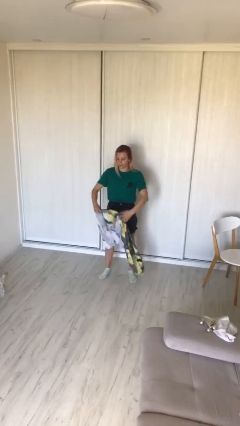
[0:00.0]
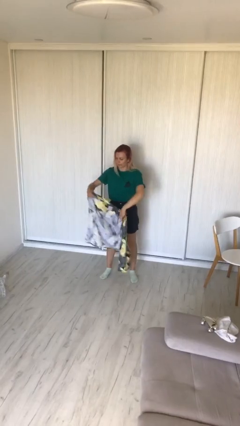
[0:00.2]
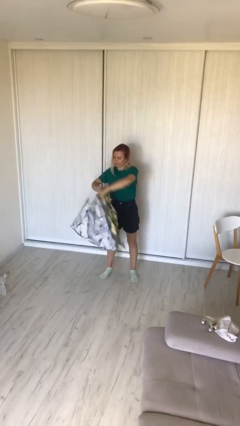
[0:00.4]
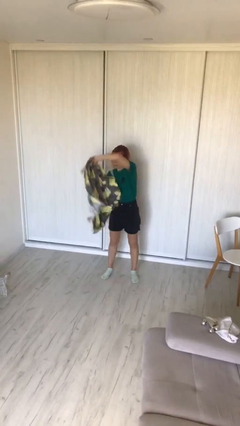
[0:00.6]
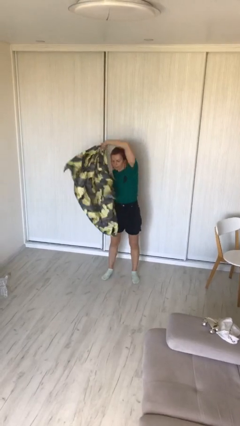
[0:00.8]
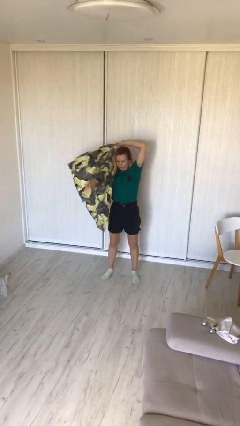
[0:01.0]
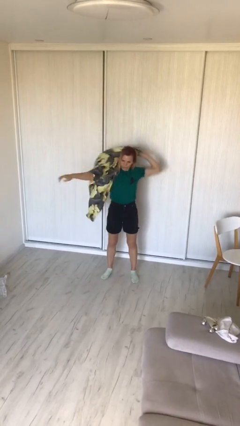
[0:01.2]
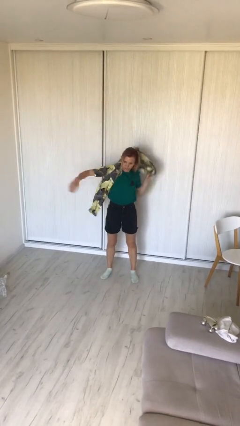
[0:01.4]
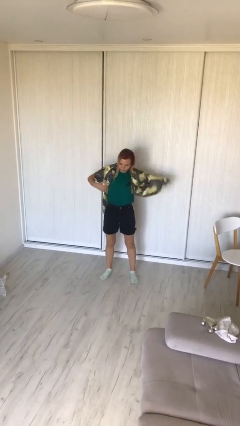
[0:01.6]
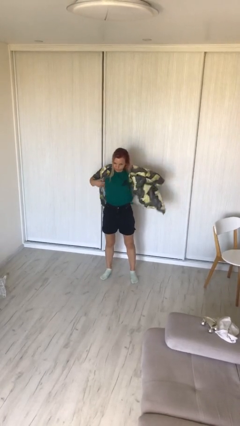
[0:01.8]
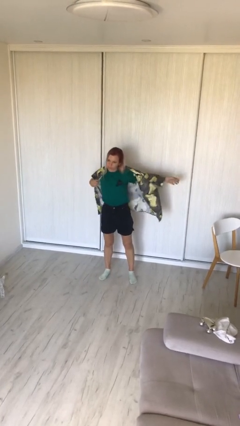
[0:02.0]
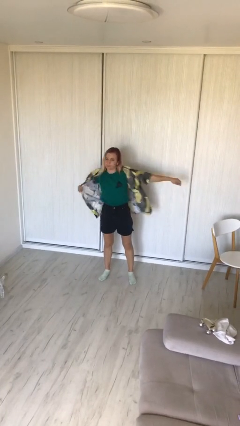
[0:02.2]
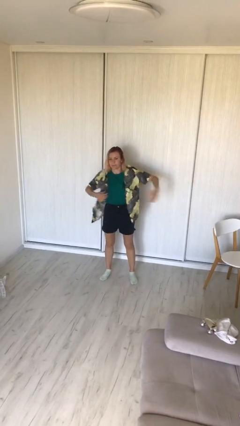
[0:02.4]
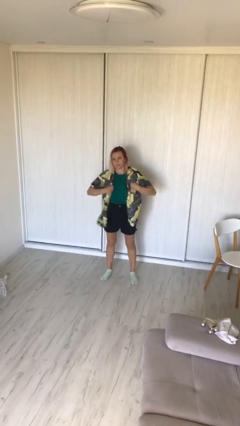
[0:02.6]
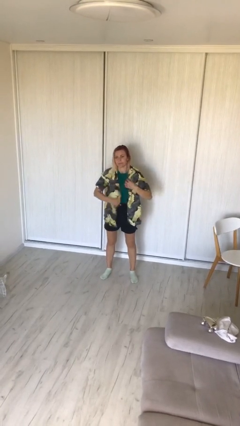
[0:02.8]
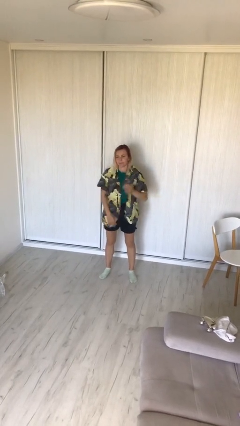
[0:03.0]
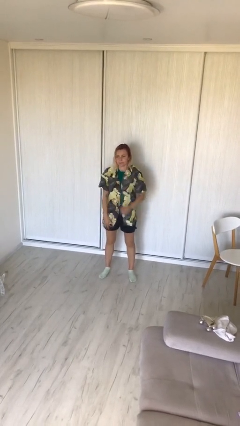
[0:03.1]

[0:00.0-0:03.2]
person puts on shirt

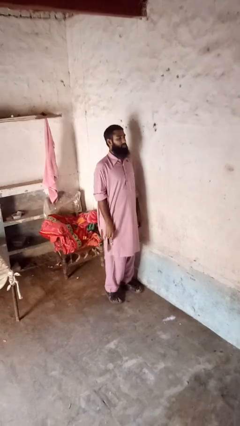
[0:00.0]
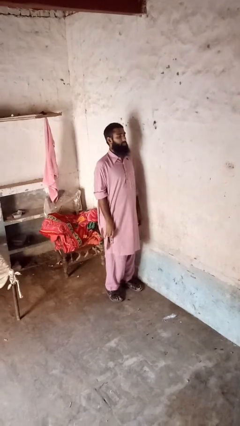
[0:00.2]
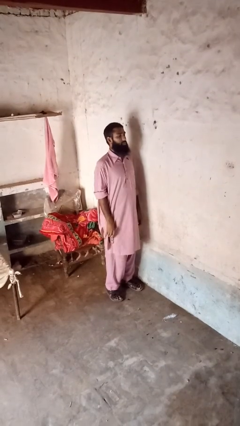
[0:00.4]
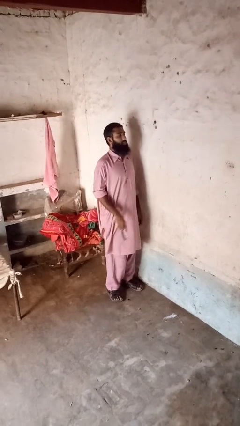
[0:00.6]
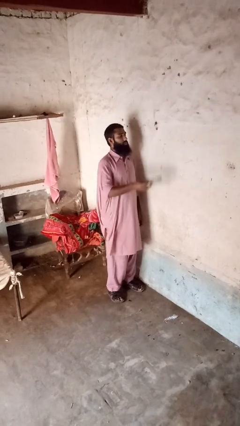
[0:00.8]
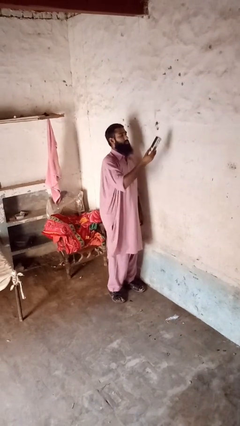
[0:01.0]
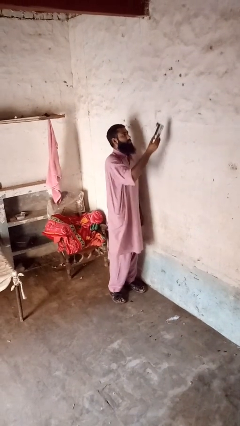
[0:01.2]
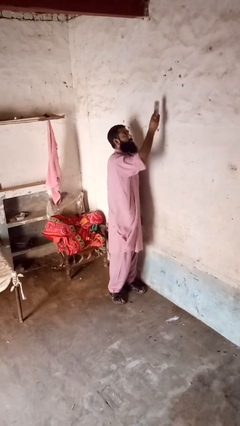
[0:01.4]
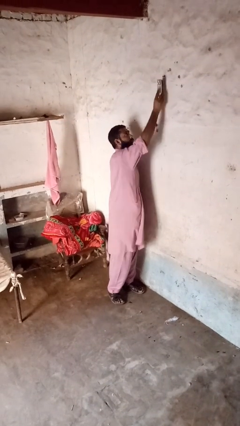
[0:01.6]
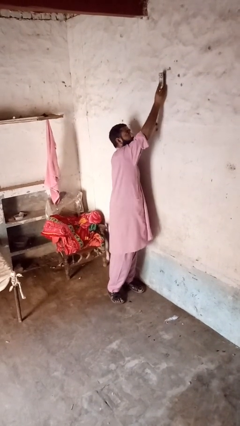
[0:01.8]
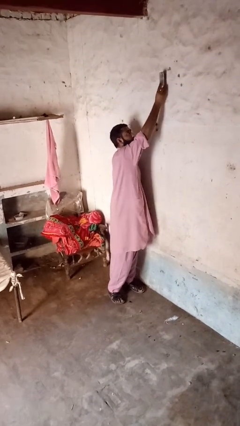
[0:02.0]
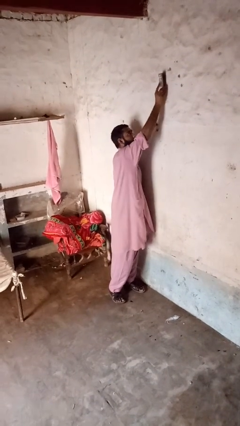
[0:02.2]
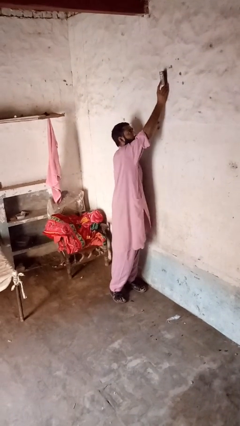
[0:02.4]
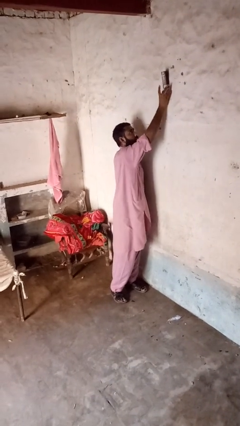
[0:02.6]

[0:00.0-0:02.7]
person adjusts thermostat

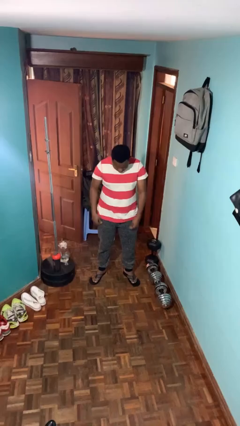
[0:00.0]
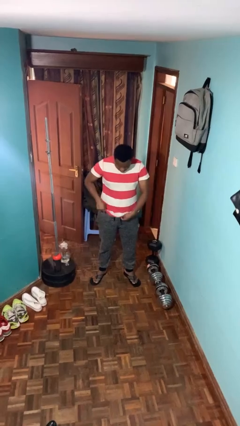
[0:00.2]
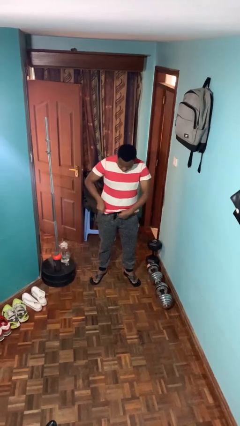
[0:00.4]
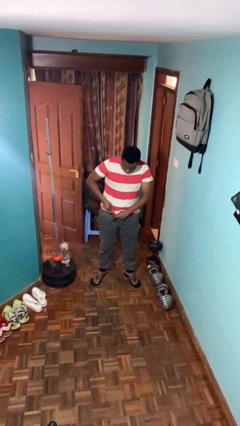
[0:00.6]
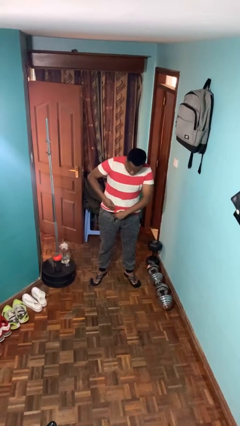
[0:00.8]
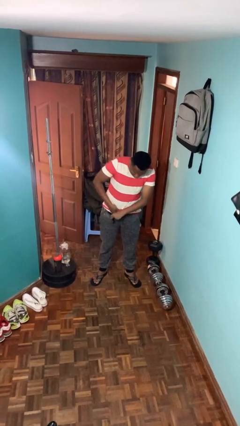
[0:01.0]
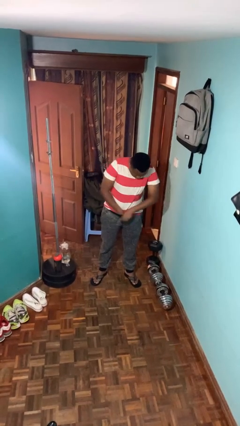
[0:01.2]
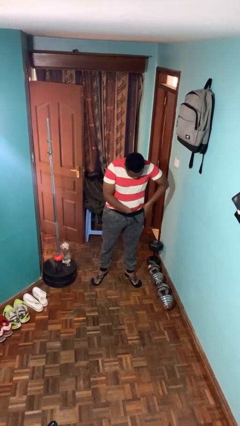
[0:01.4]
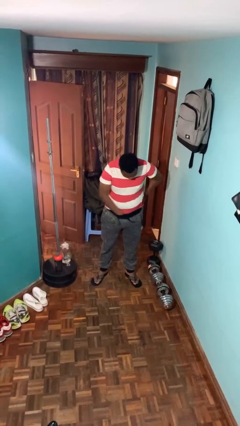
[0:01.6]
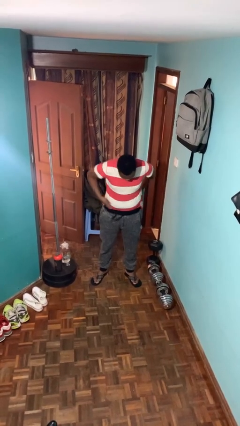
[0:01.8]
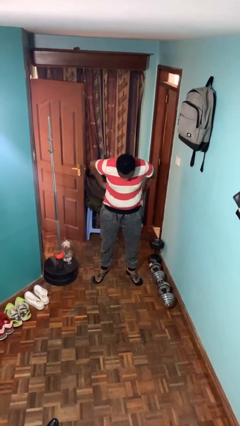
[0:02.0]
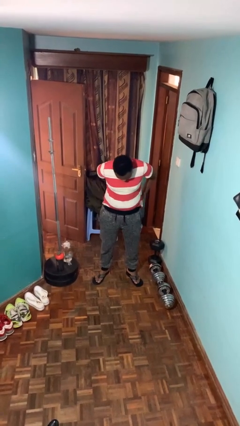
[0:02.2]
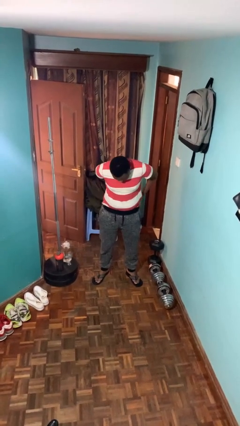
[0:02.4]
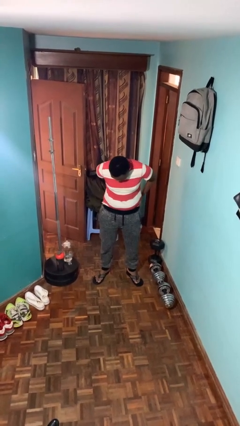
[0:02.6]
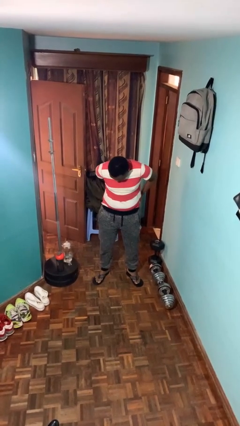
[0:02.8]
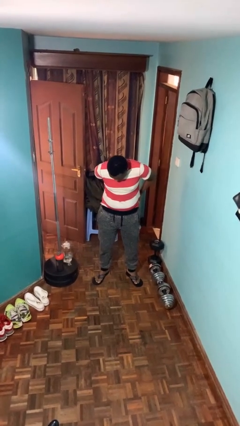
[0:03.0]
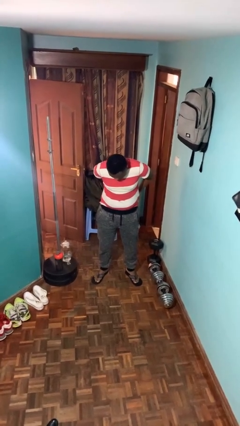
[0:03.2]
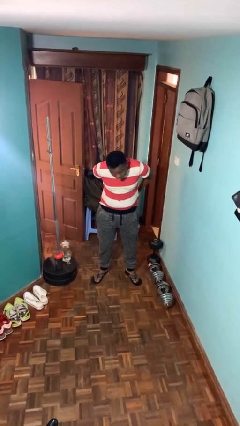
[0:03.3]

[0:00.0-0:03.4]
person tucks in shirt

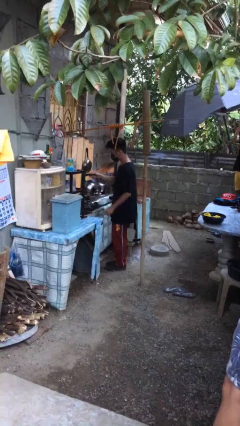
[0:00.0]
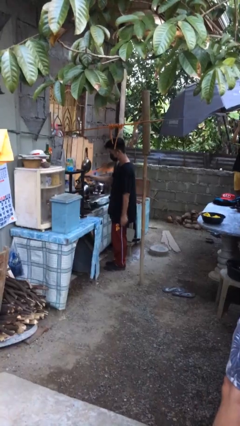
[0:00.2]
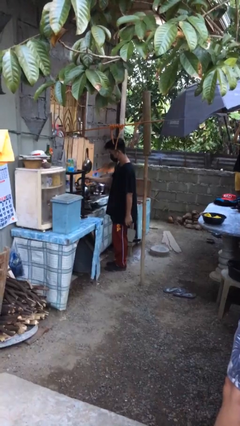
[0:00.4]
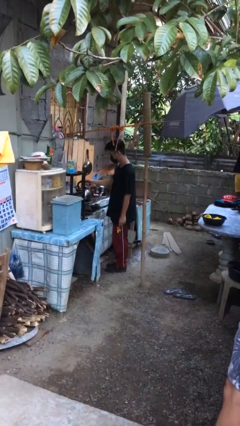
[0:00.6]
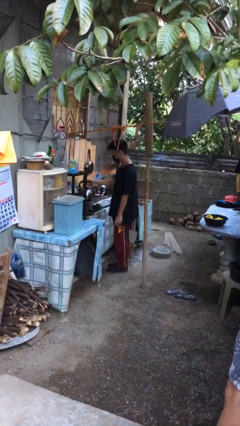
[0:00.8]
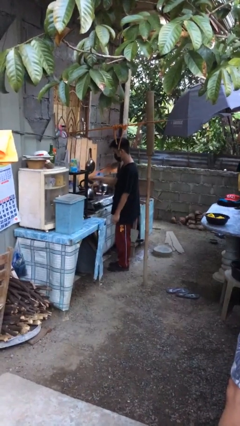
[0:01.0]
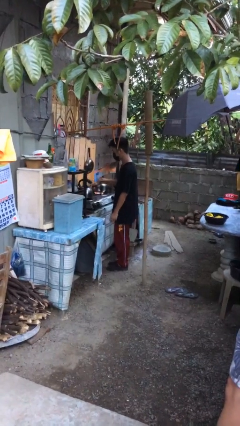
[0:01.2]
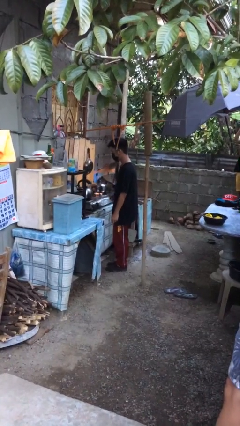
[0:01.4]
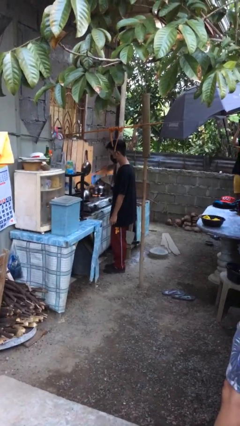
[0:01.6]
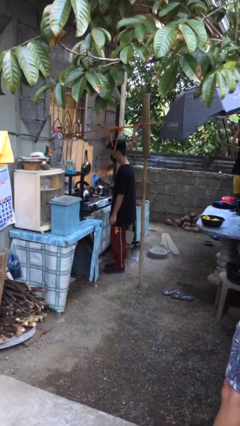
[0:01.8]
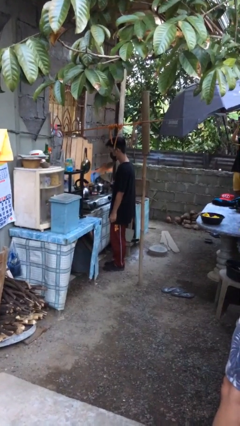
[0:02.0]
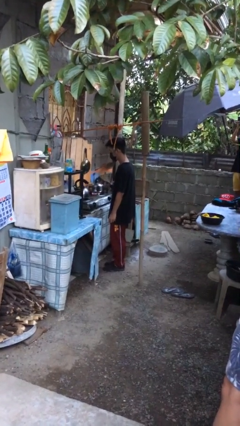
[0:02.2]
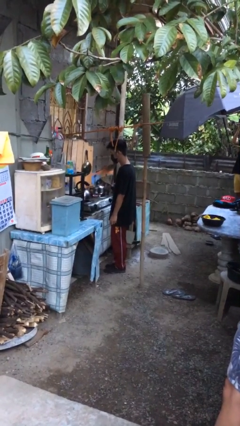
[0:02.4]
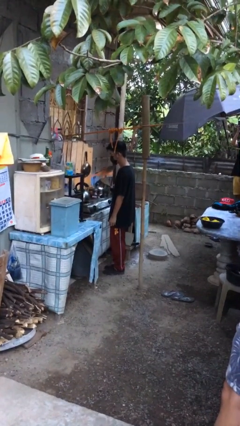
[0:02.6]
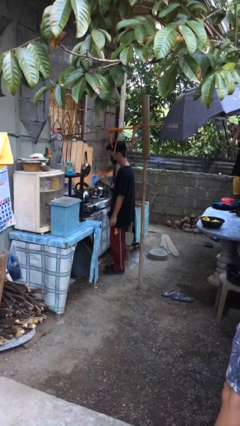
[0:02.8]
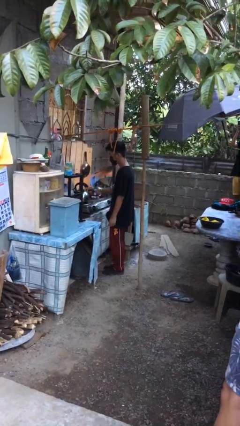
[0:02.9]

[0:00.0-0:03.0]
person puts down object on countertop

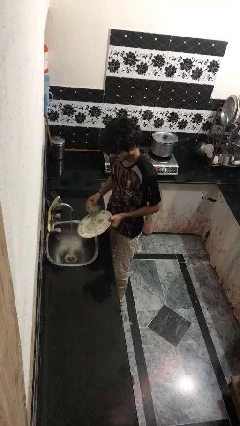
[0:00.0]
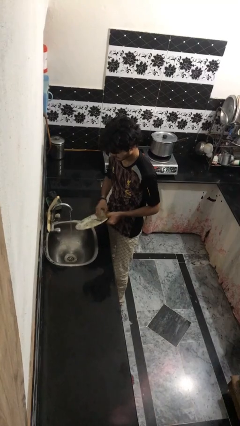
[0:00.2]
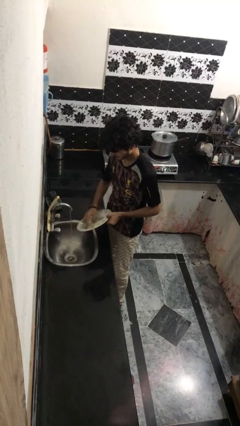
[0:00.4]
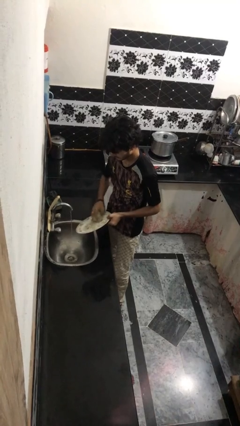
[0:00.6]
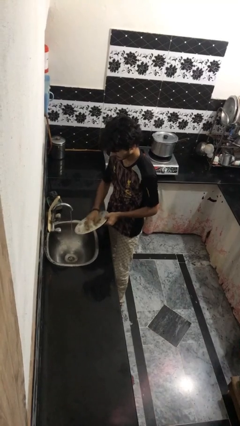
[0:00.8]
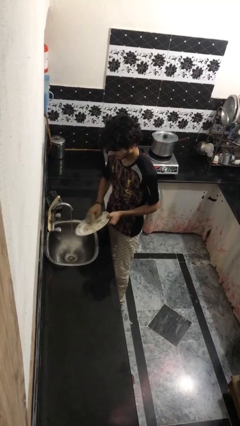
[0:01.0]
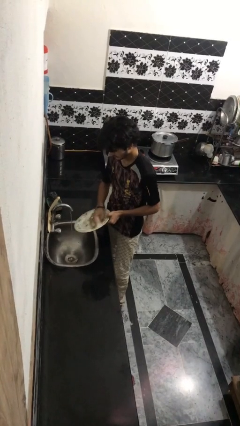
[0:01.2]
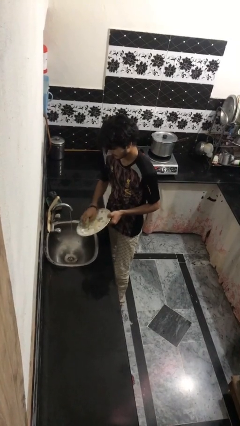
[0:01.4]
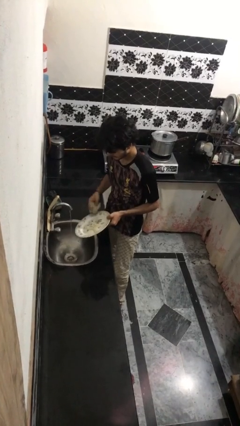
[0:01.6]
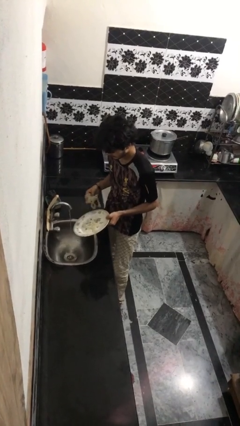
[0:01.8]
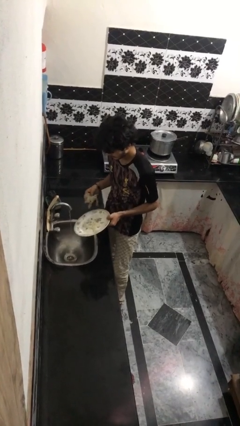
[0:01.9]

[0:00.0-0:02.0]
person washes dish

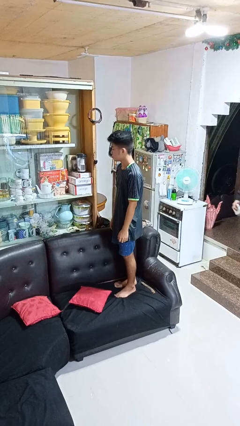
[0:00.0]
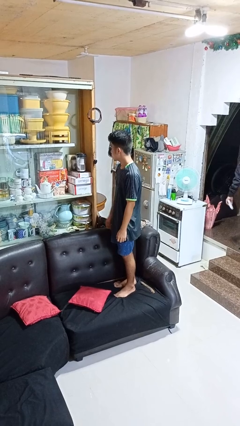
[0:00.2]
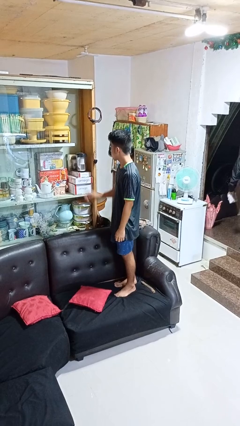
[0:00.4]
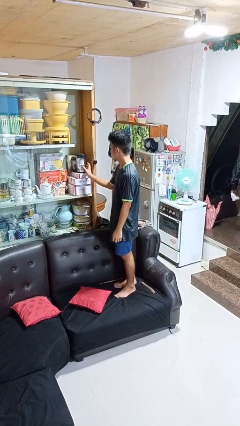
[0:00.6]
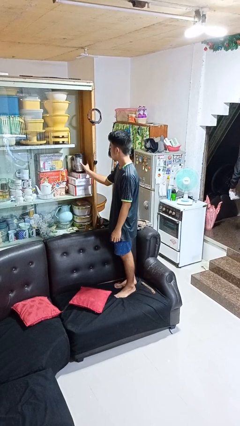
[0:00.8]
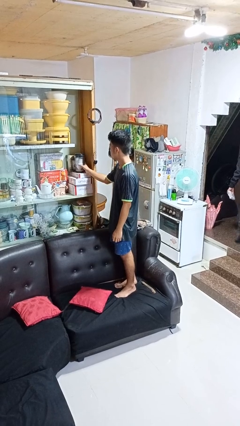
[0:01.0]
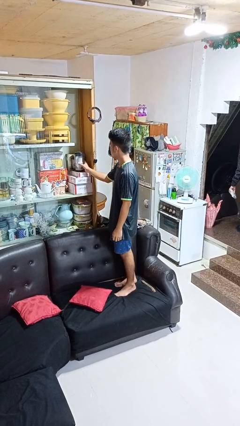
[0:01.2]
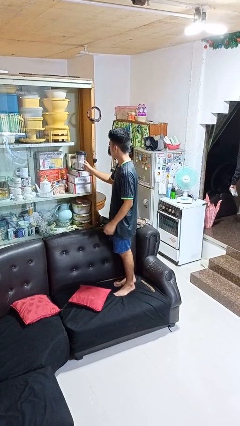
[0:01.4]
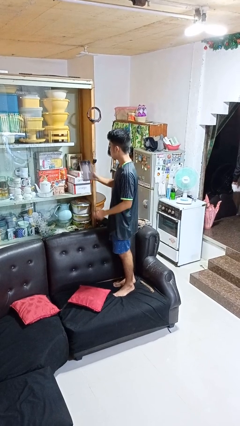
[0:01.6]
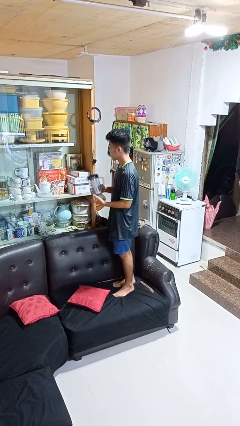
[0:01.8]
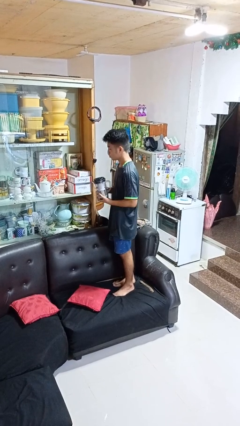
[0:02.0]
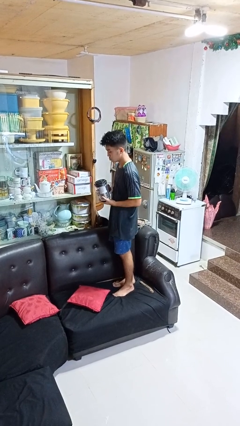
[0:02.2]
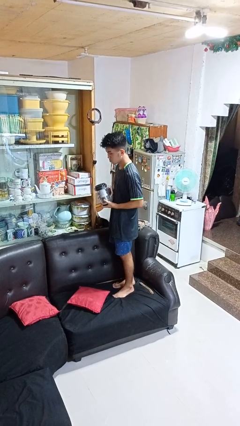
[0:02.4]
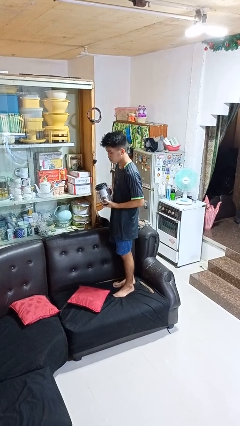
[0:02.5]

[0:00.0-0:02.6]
person picks up object from cabinet

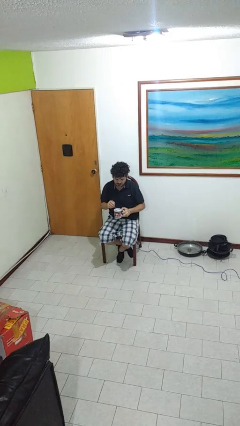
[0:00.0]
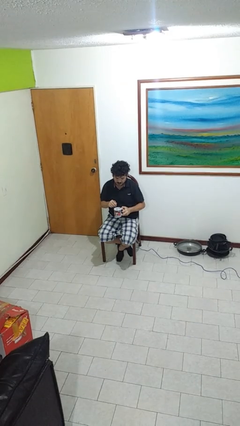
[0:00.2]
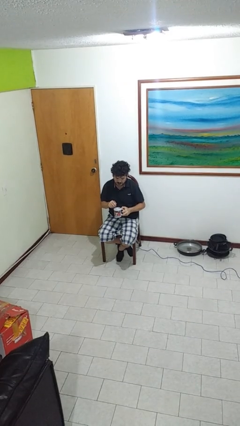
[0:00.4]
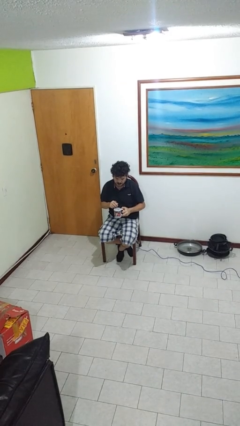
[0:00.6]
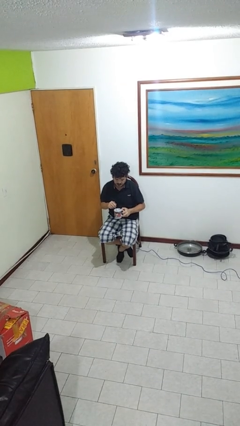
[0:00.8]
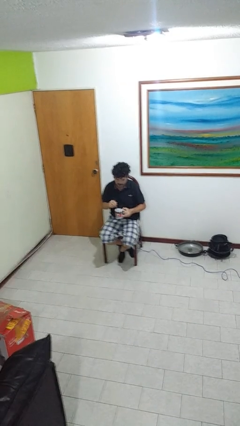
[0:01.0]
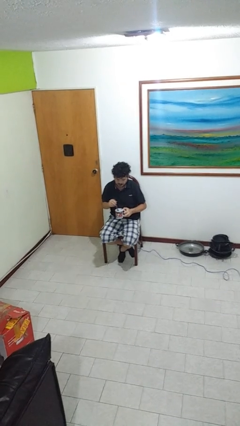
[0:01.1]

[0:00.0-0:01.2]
person stirs mug
